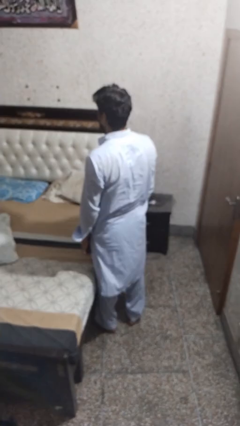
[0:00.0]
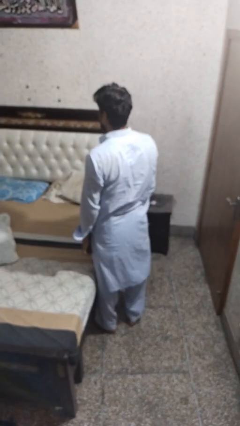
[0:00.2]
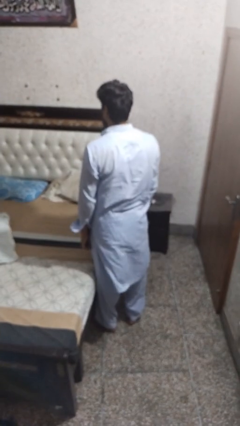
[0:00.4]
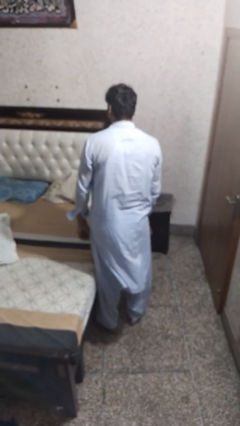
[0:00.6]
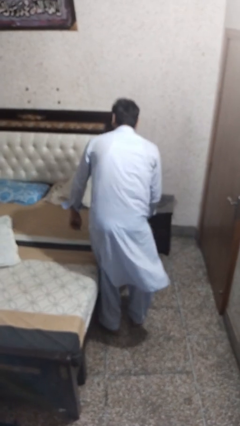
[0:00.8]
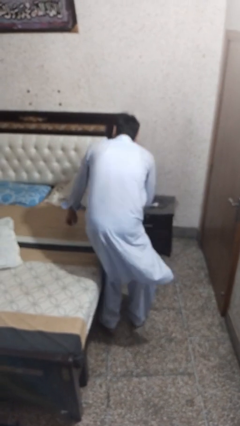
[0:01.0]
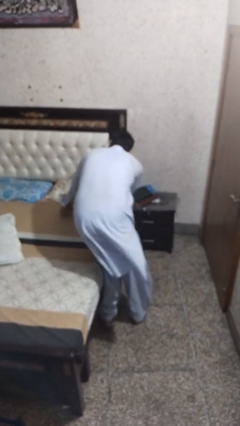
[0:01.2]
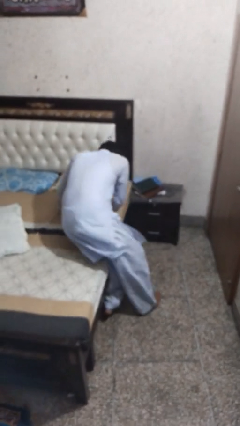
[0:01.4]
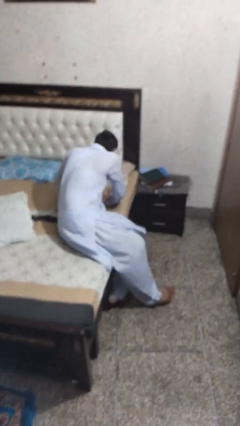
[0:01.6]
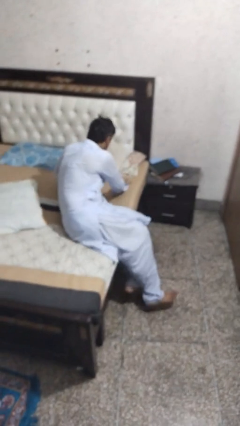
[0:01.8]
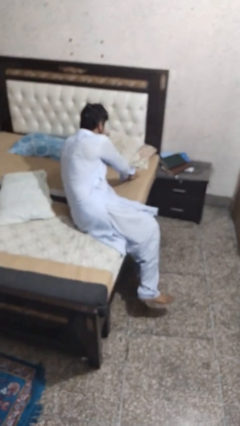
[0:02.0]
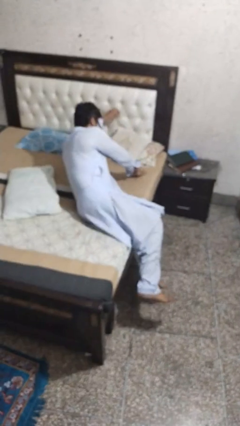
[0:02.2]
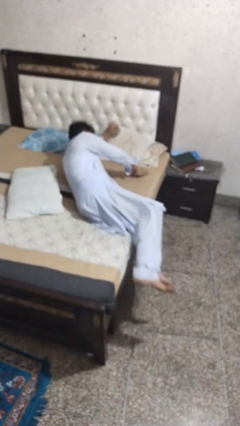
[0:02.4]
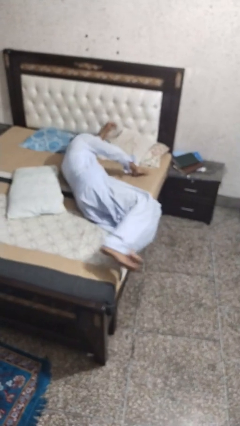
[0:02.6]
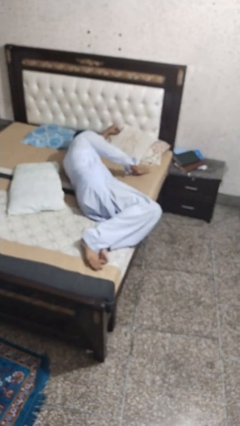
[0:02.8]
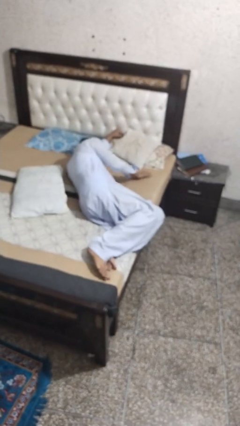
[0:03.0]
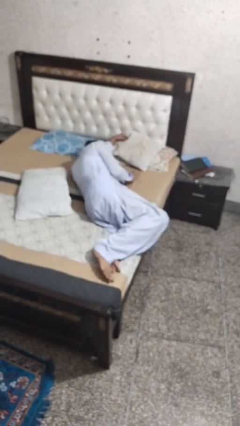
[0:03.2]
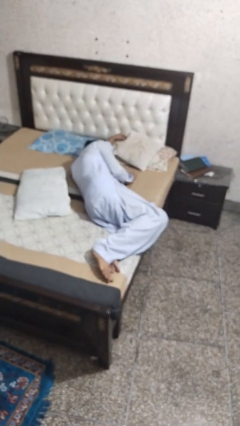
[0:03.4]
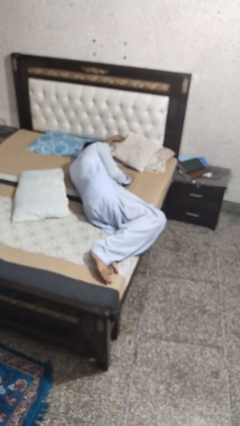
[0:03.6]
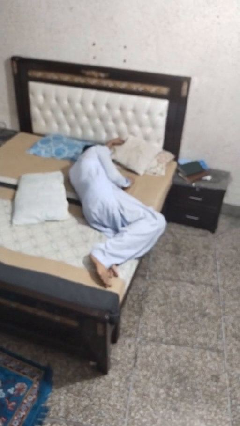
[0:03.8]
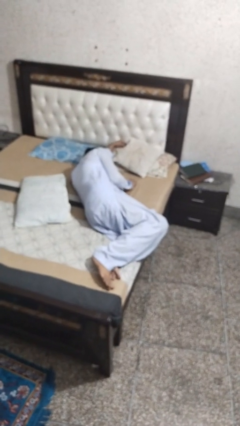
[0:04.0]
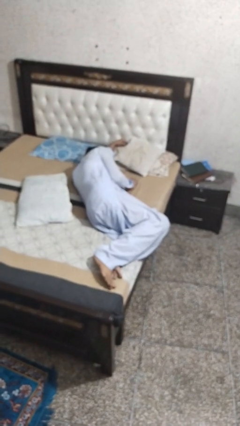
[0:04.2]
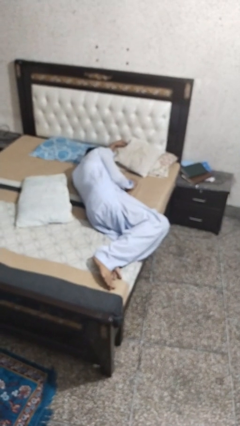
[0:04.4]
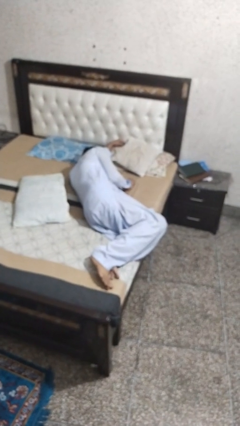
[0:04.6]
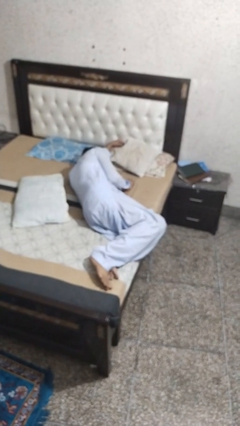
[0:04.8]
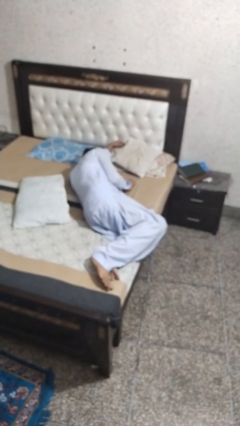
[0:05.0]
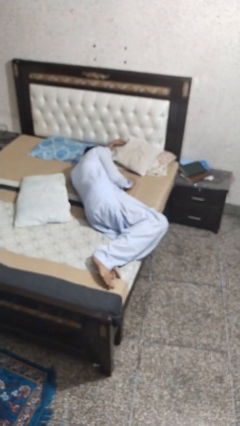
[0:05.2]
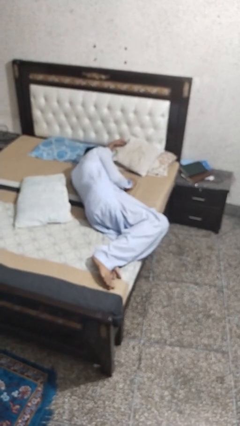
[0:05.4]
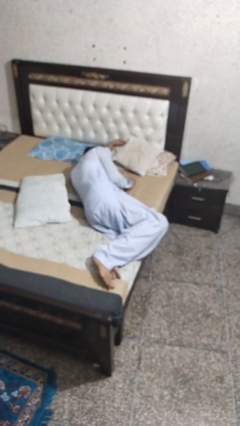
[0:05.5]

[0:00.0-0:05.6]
person lies down on bed

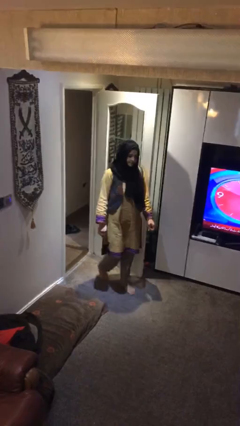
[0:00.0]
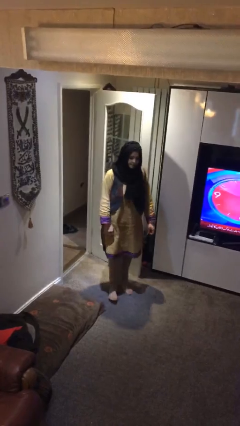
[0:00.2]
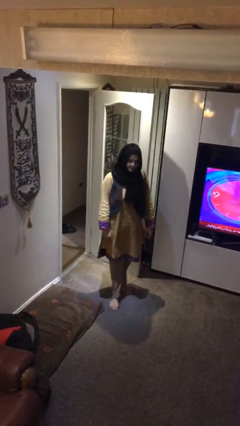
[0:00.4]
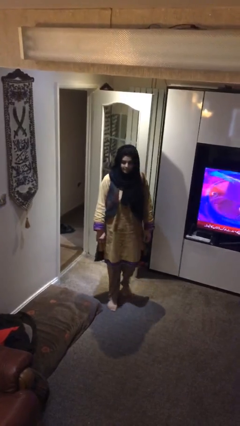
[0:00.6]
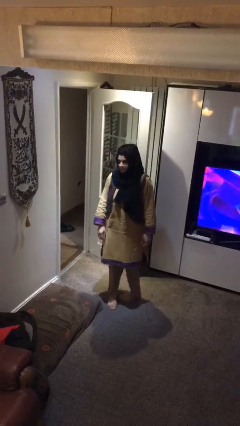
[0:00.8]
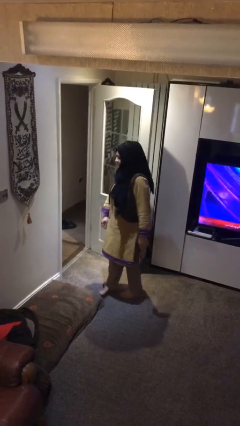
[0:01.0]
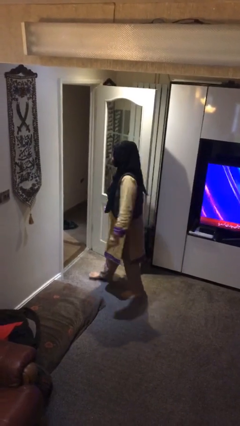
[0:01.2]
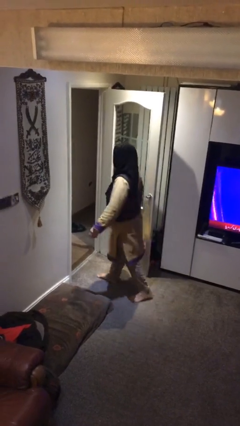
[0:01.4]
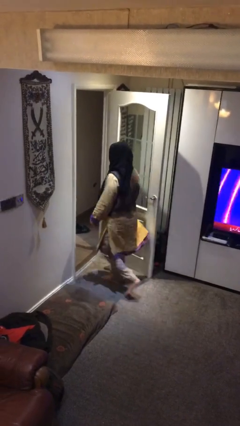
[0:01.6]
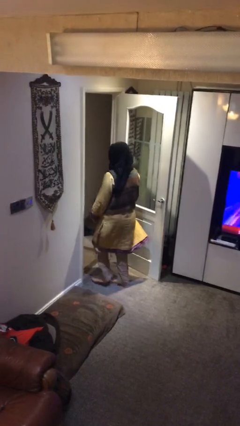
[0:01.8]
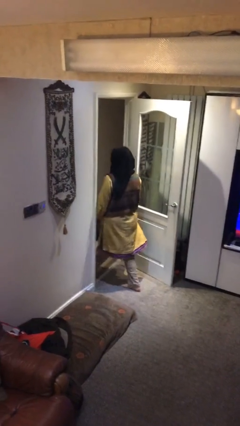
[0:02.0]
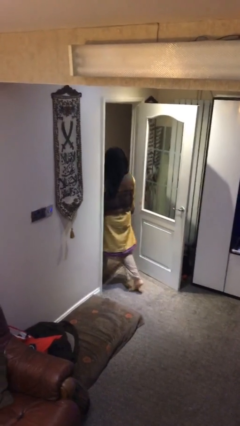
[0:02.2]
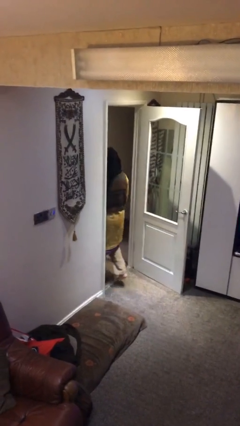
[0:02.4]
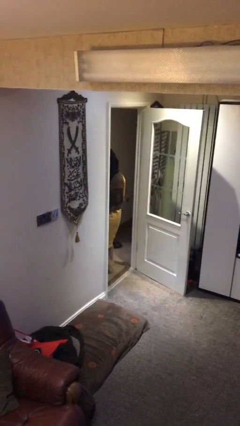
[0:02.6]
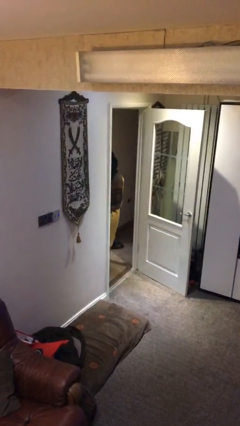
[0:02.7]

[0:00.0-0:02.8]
person exits scene through structure

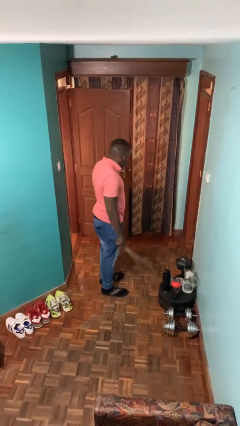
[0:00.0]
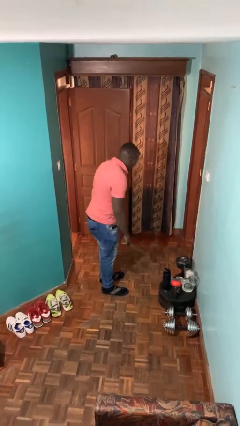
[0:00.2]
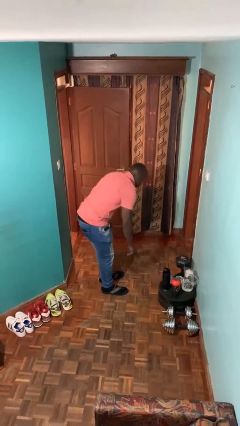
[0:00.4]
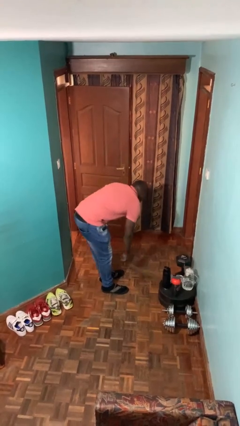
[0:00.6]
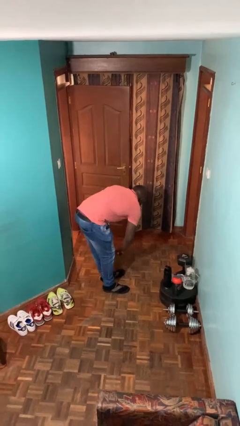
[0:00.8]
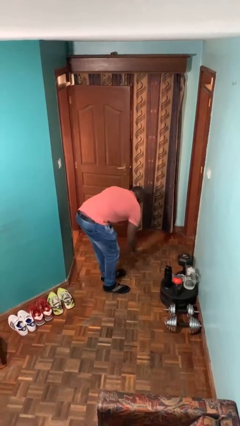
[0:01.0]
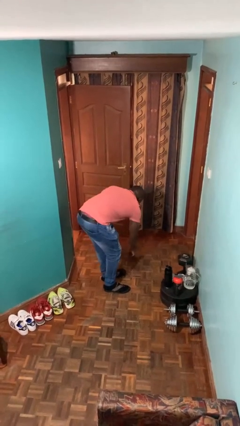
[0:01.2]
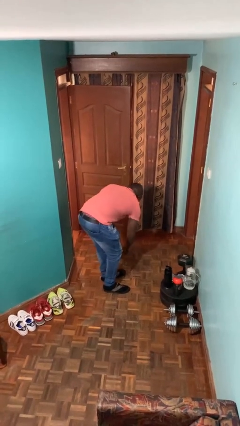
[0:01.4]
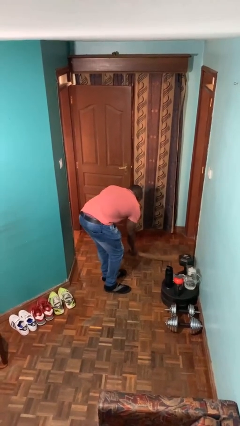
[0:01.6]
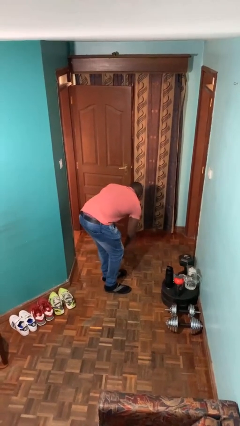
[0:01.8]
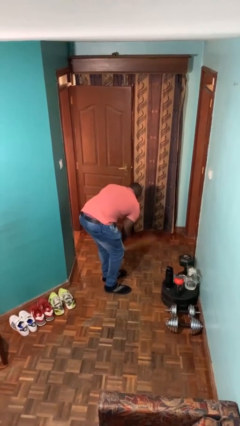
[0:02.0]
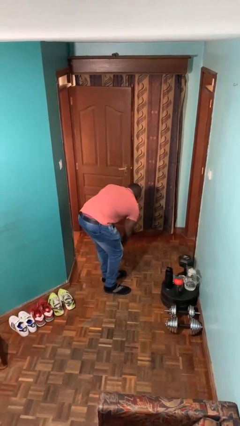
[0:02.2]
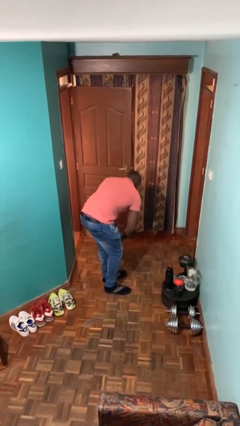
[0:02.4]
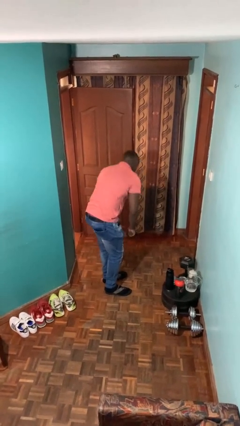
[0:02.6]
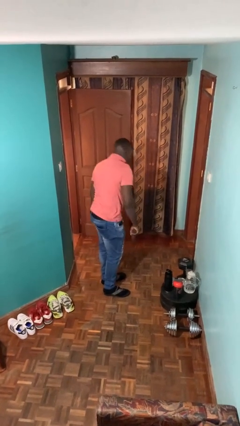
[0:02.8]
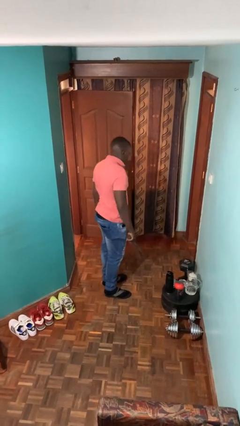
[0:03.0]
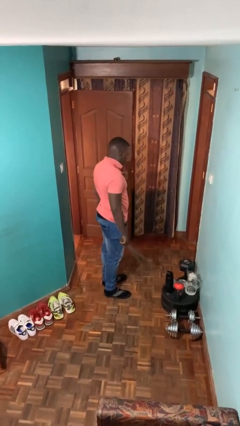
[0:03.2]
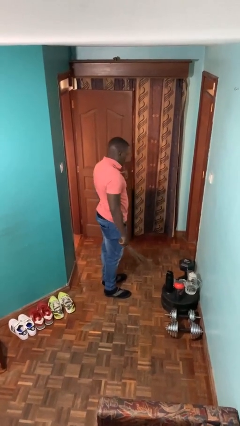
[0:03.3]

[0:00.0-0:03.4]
person sweeps floor

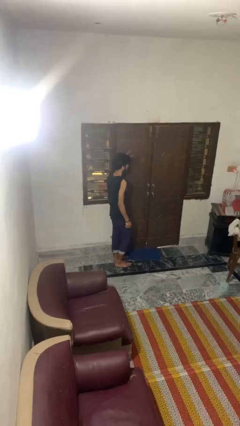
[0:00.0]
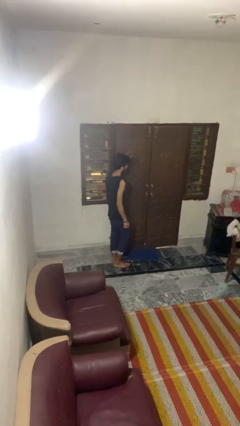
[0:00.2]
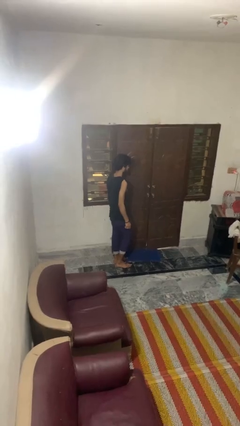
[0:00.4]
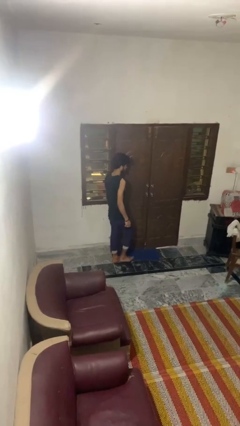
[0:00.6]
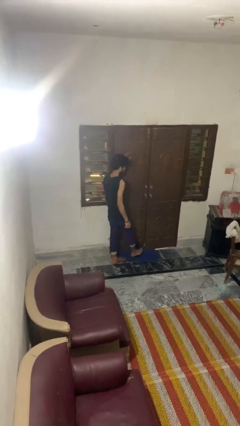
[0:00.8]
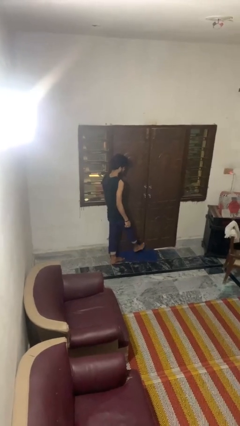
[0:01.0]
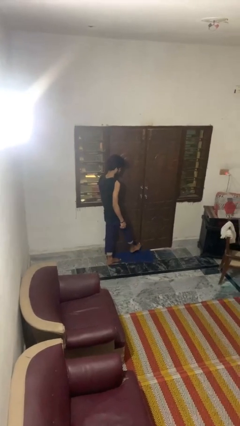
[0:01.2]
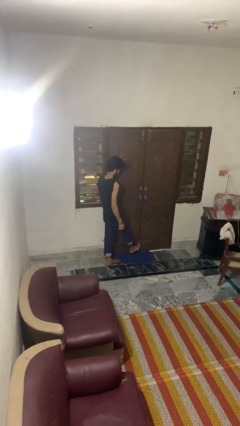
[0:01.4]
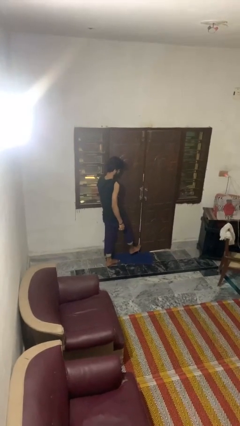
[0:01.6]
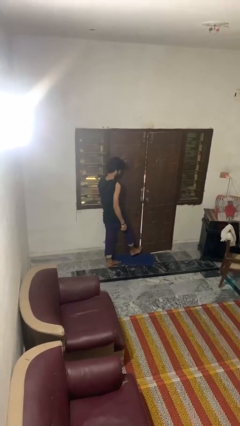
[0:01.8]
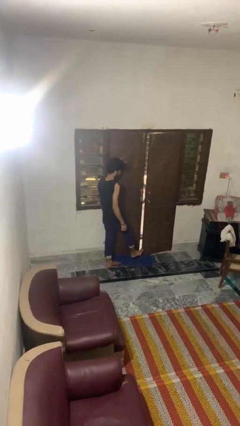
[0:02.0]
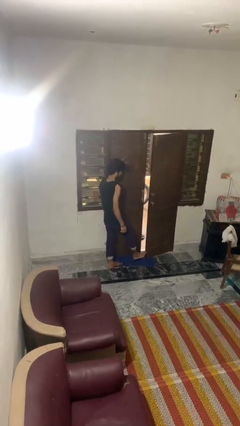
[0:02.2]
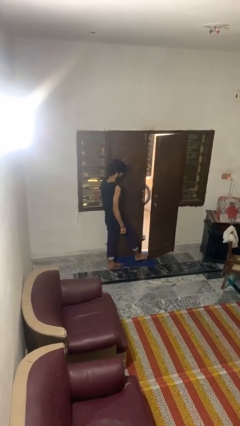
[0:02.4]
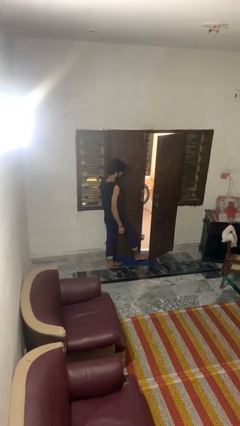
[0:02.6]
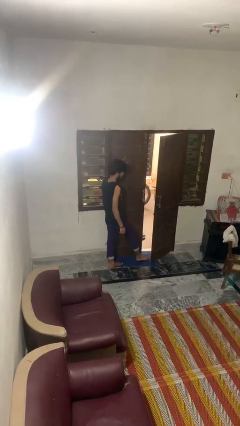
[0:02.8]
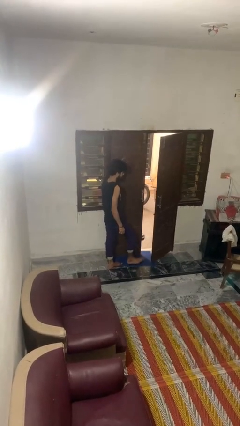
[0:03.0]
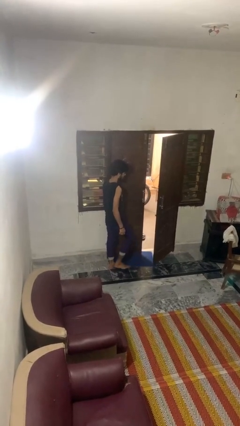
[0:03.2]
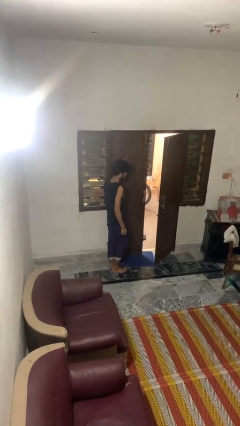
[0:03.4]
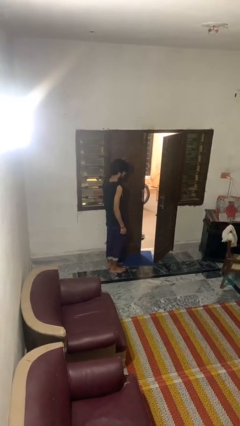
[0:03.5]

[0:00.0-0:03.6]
person opens facility door

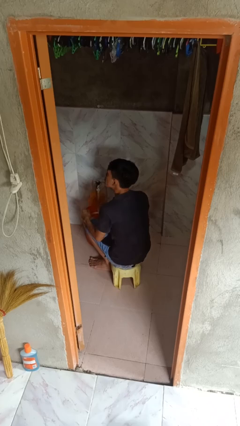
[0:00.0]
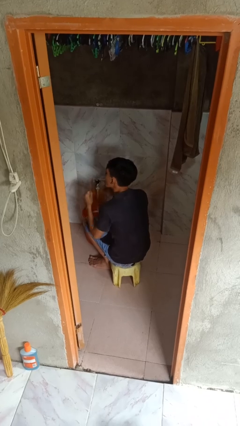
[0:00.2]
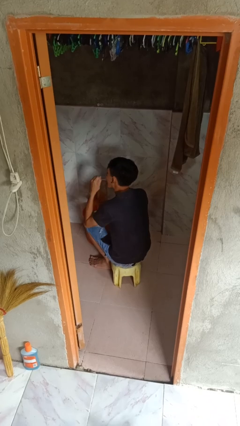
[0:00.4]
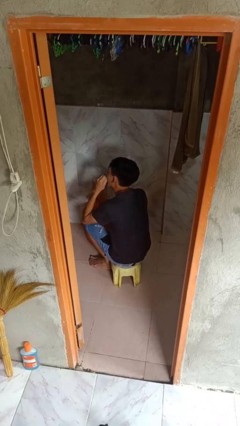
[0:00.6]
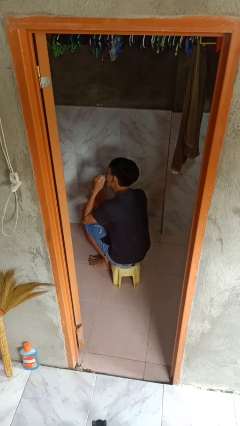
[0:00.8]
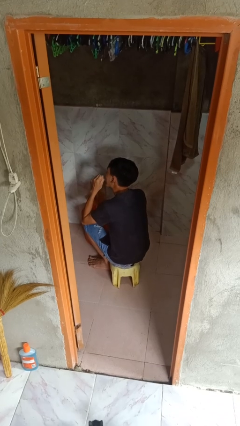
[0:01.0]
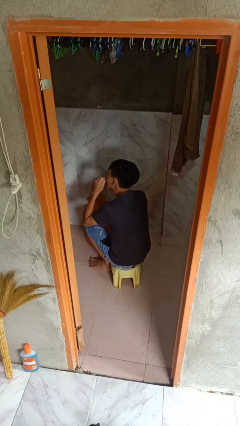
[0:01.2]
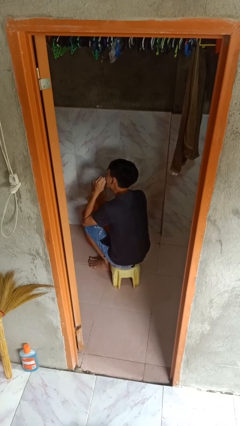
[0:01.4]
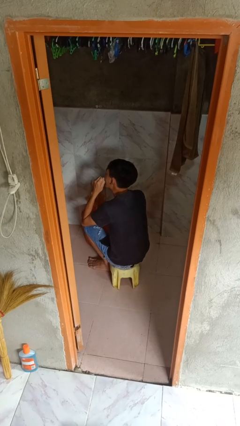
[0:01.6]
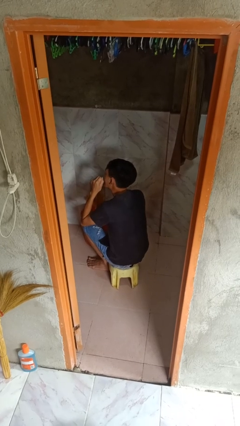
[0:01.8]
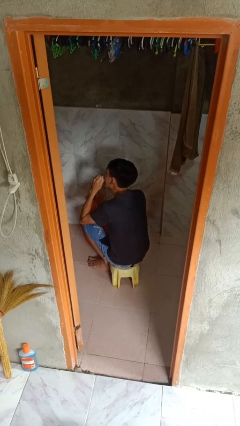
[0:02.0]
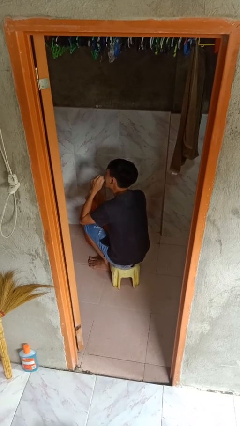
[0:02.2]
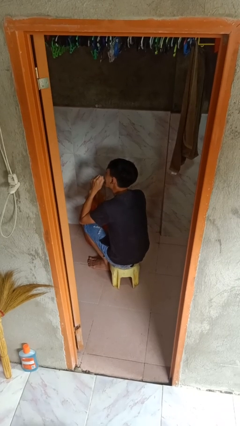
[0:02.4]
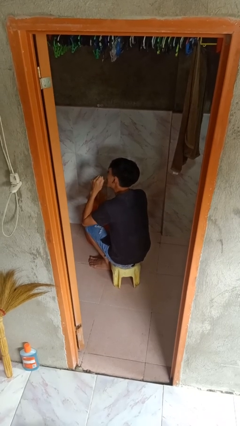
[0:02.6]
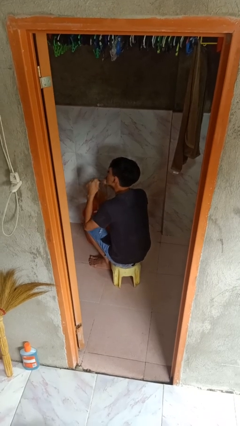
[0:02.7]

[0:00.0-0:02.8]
person flosses
